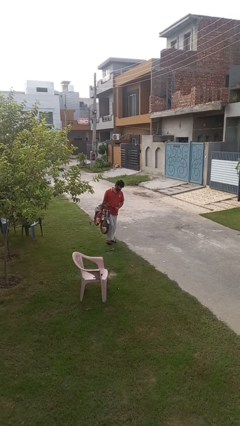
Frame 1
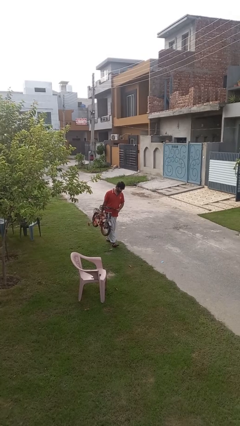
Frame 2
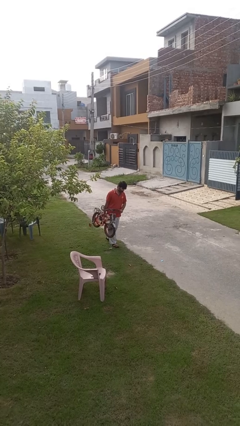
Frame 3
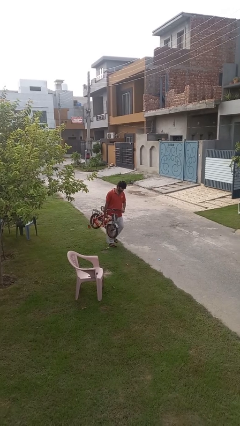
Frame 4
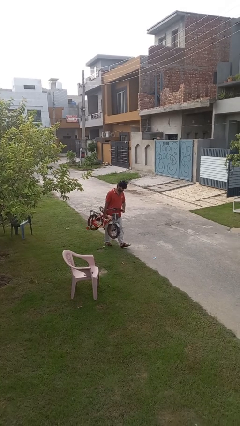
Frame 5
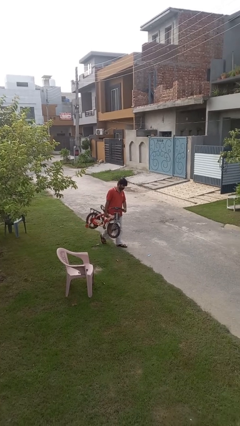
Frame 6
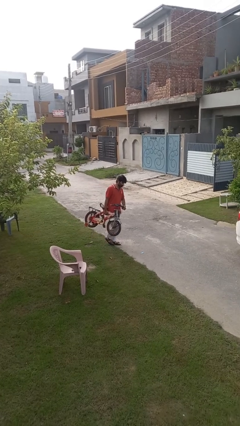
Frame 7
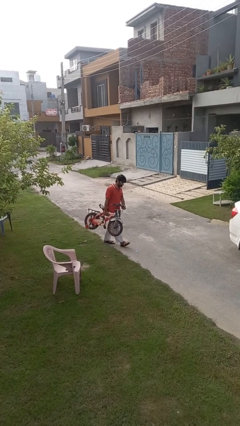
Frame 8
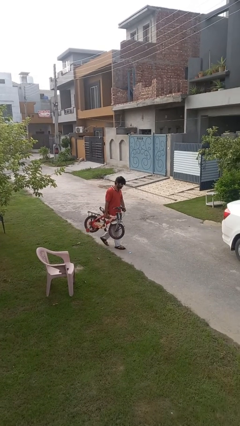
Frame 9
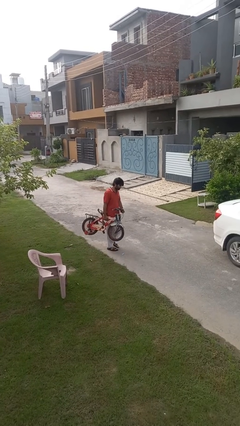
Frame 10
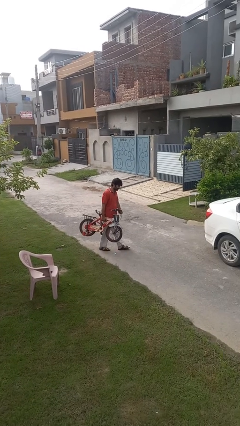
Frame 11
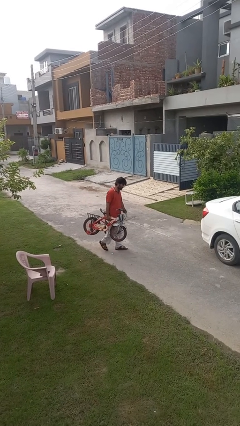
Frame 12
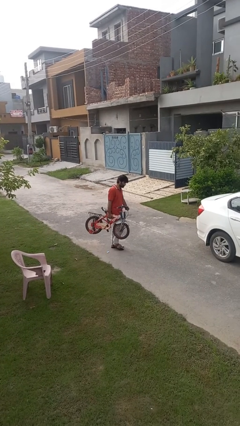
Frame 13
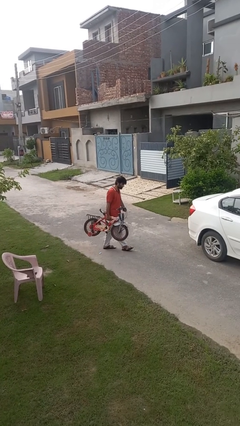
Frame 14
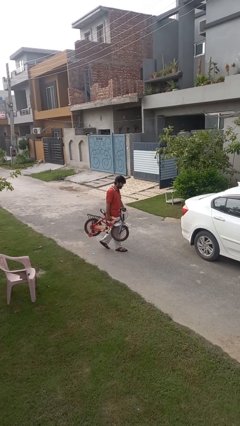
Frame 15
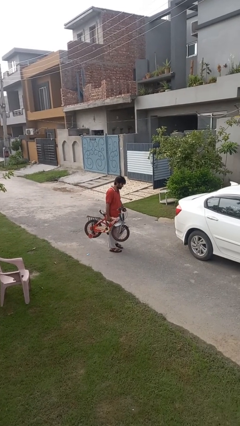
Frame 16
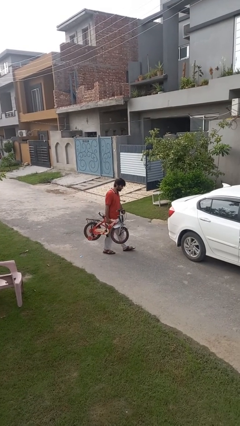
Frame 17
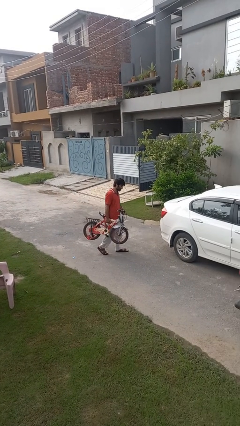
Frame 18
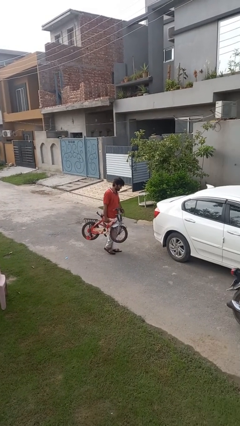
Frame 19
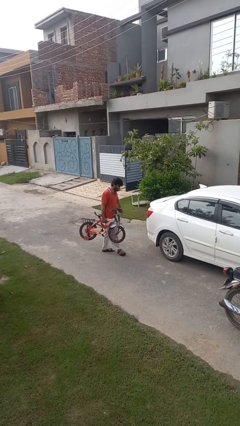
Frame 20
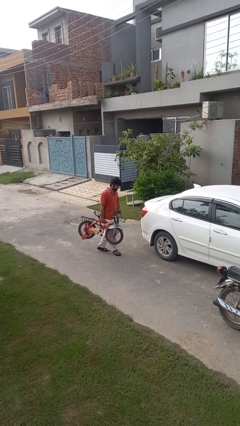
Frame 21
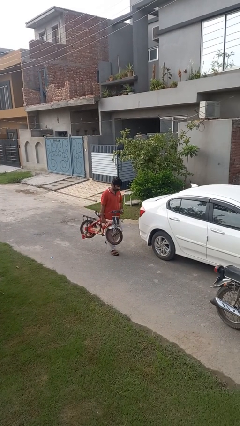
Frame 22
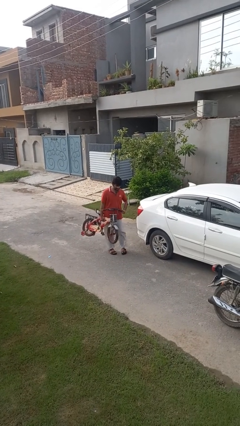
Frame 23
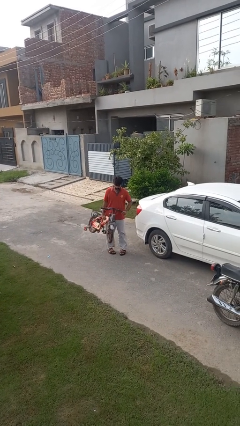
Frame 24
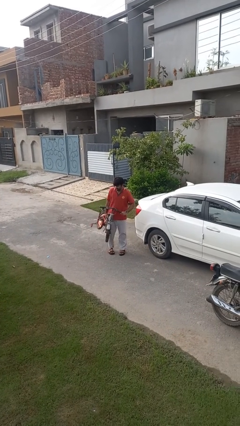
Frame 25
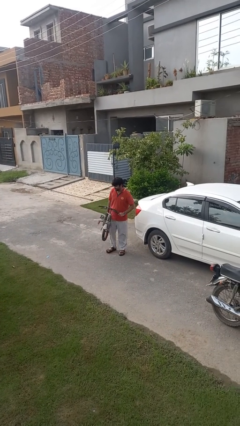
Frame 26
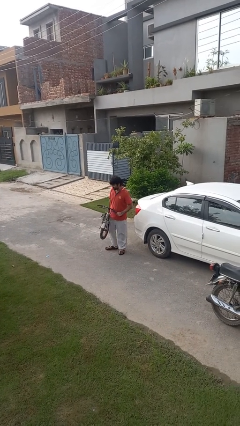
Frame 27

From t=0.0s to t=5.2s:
person carries bicycle

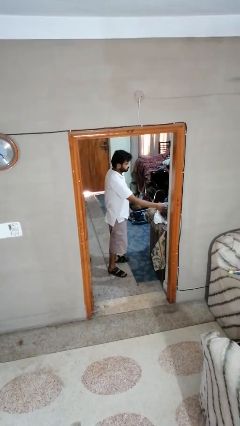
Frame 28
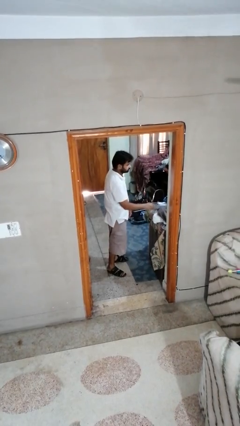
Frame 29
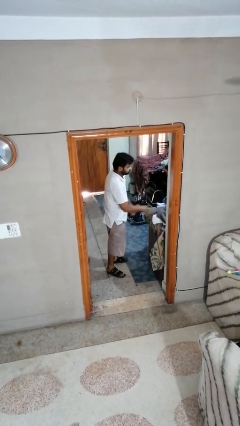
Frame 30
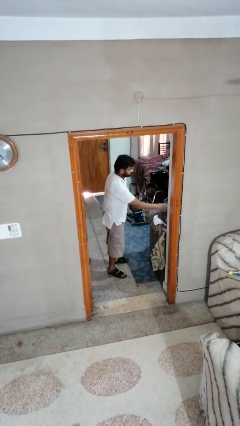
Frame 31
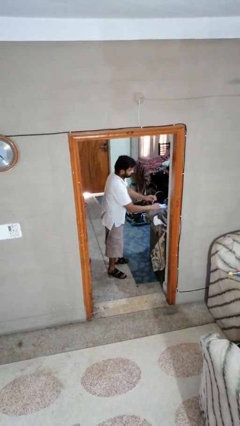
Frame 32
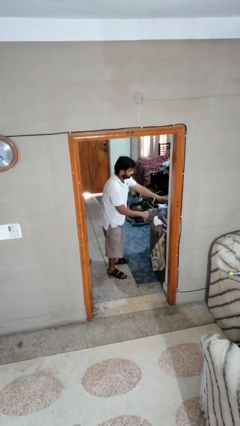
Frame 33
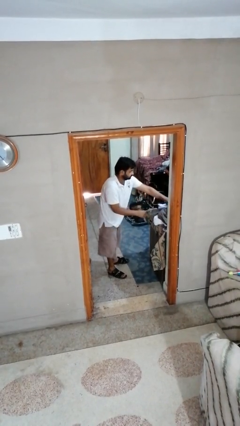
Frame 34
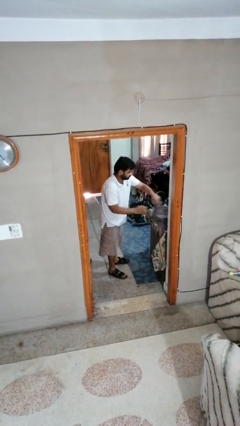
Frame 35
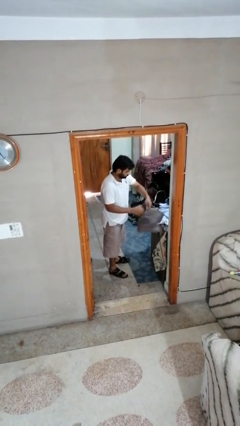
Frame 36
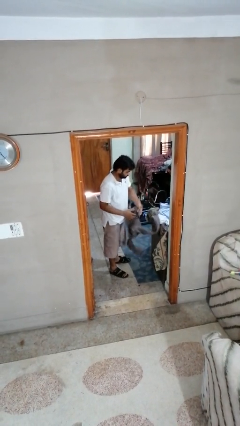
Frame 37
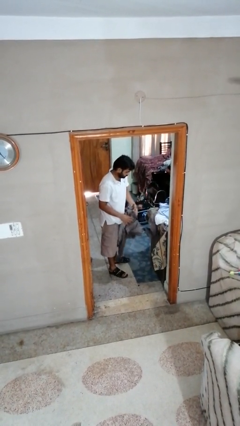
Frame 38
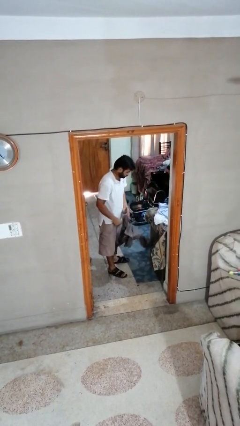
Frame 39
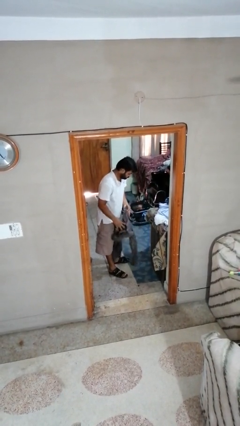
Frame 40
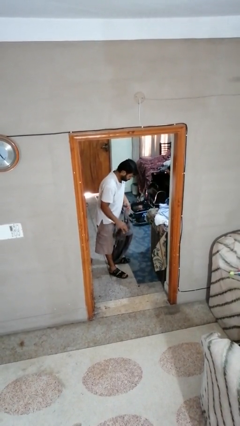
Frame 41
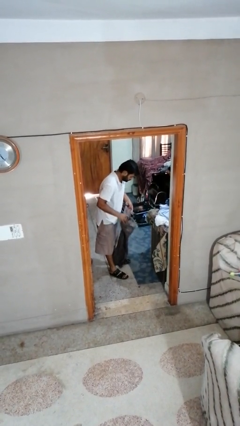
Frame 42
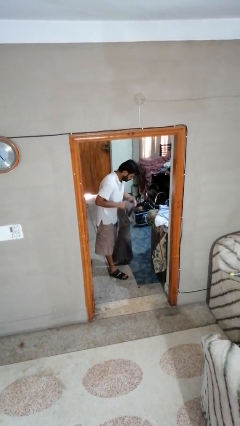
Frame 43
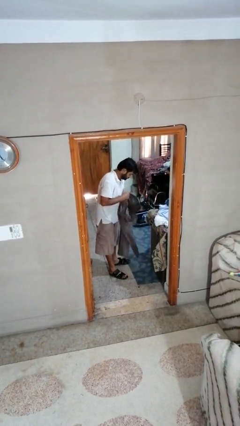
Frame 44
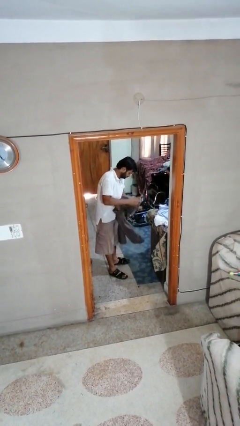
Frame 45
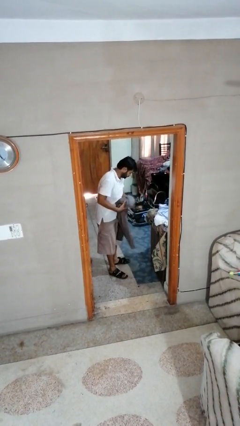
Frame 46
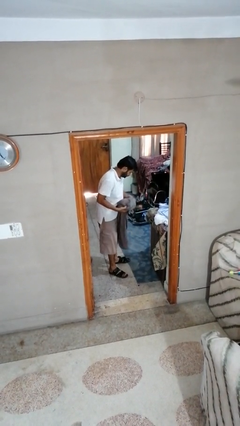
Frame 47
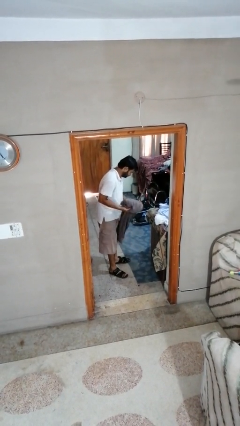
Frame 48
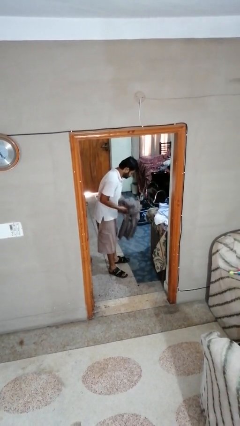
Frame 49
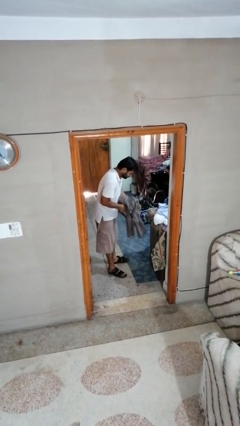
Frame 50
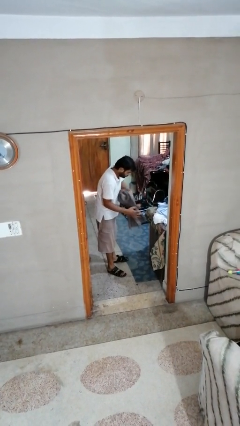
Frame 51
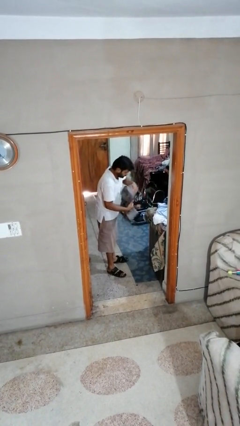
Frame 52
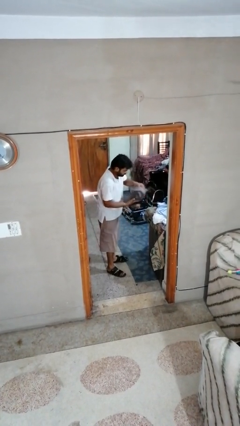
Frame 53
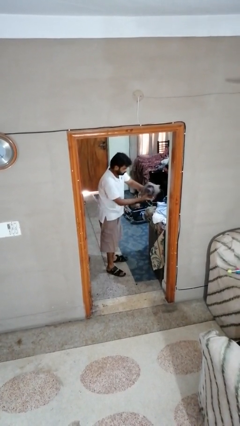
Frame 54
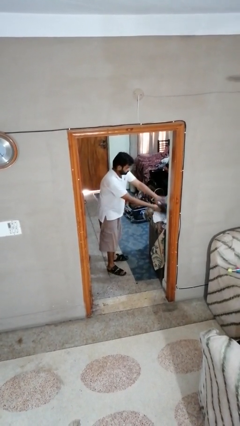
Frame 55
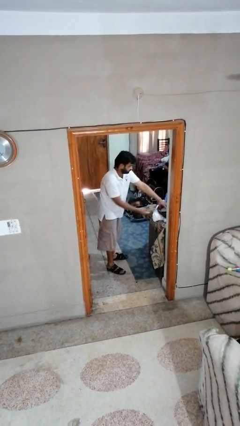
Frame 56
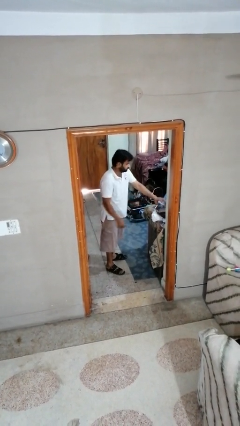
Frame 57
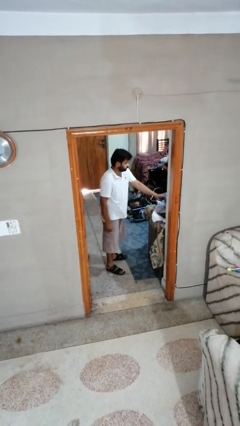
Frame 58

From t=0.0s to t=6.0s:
person folds pants

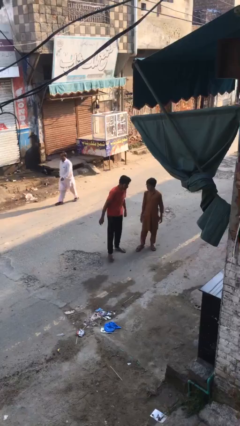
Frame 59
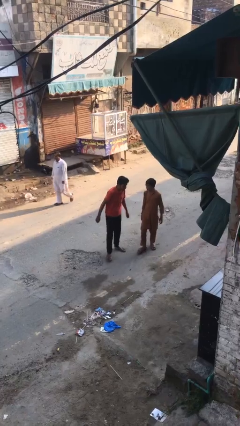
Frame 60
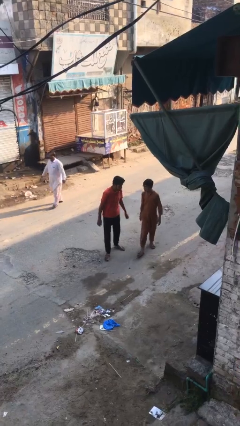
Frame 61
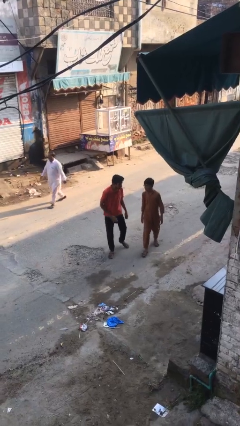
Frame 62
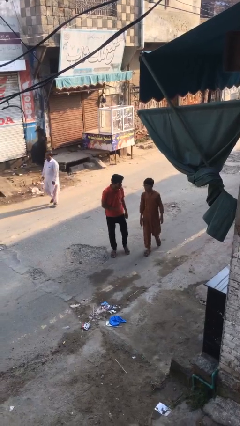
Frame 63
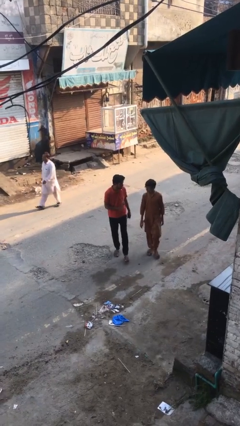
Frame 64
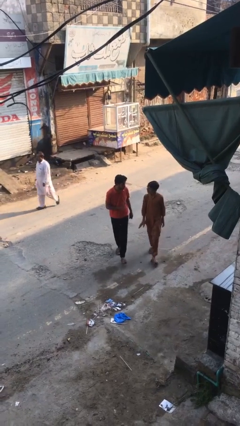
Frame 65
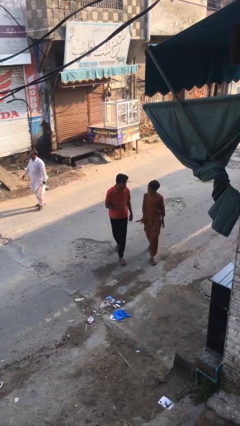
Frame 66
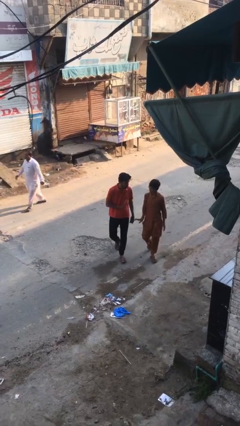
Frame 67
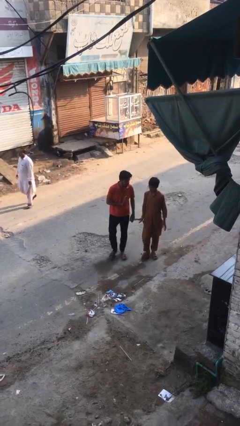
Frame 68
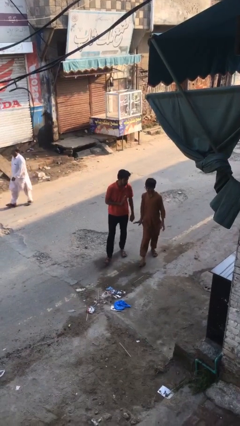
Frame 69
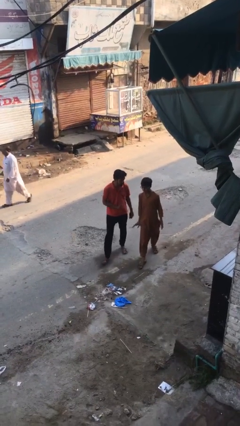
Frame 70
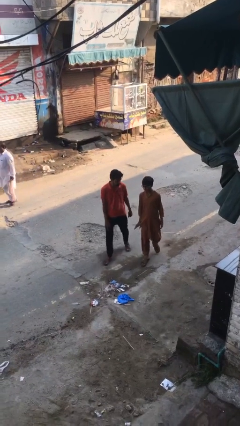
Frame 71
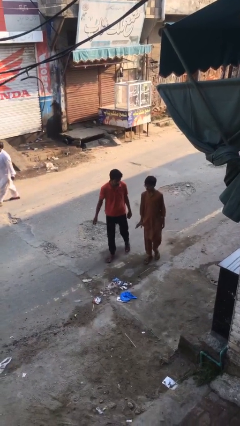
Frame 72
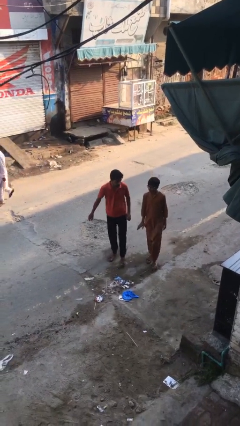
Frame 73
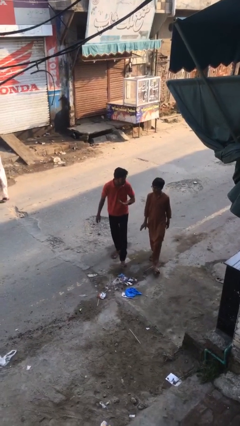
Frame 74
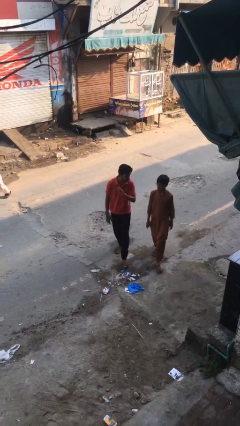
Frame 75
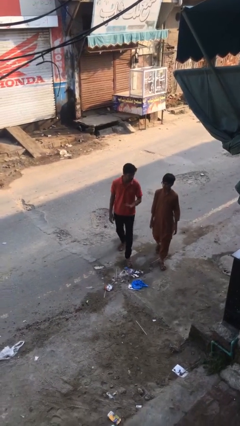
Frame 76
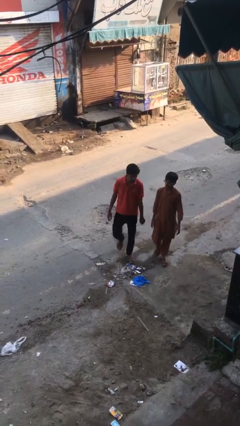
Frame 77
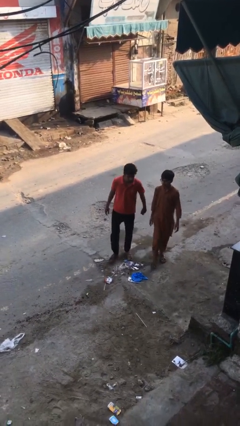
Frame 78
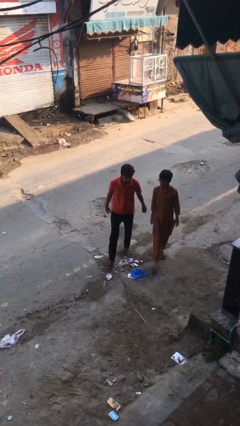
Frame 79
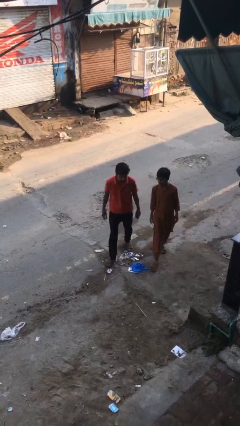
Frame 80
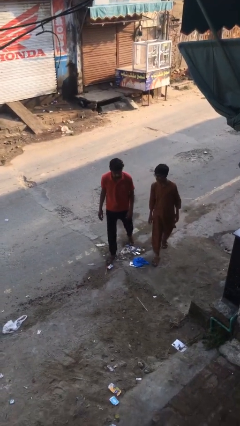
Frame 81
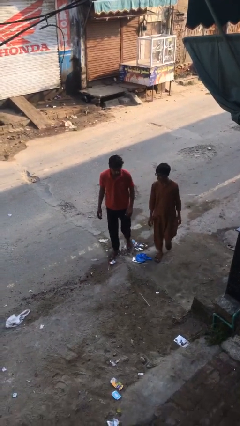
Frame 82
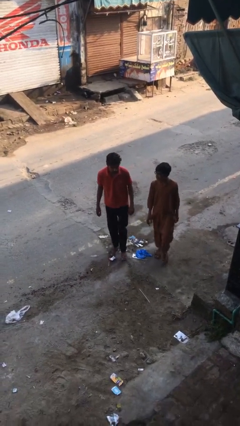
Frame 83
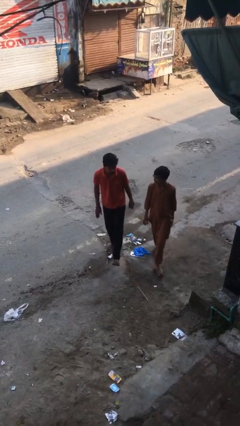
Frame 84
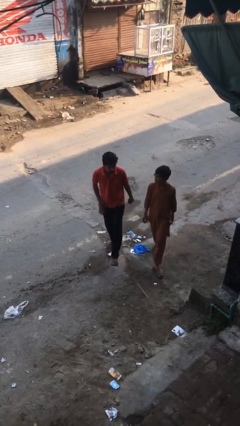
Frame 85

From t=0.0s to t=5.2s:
person talks to person

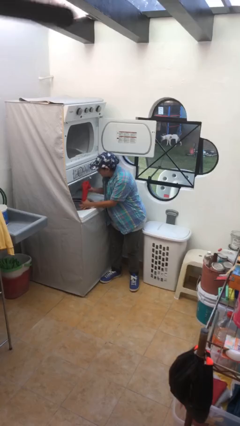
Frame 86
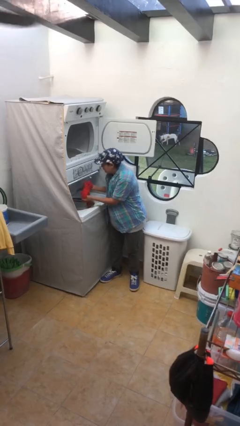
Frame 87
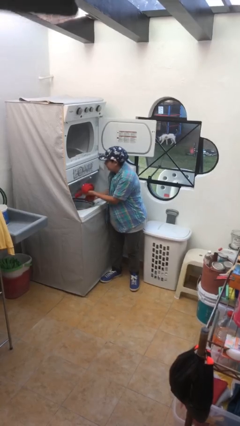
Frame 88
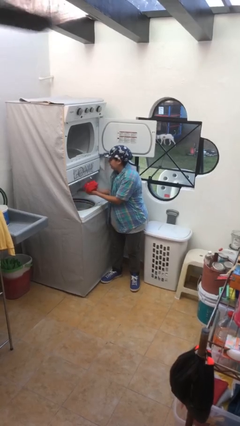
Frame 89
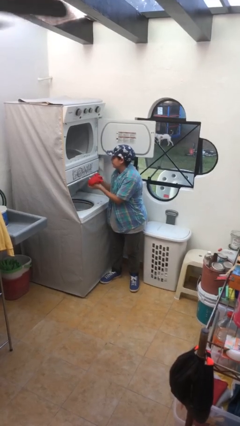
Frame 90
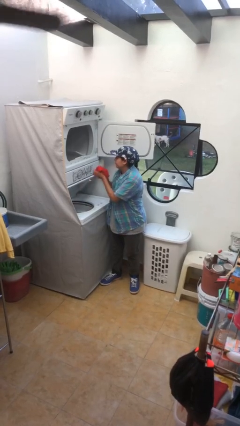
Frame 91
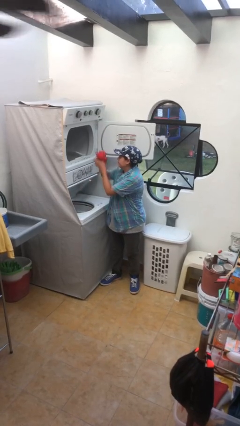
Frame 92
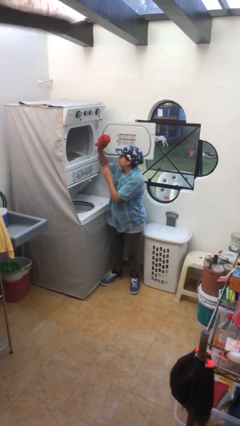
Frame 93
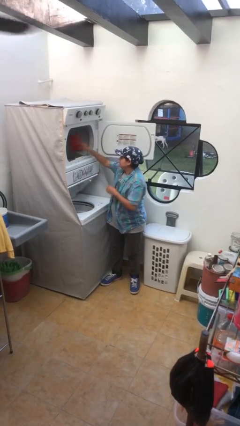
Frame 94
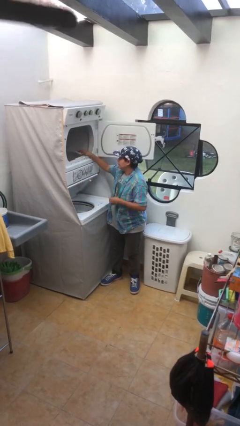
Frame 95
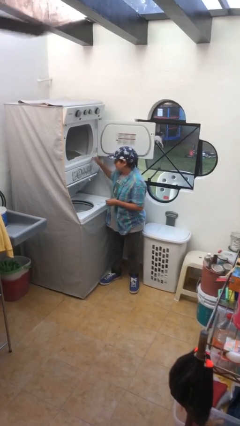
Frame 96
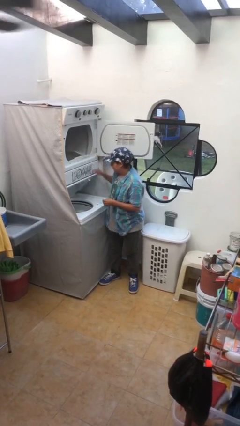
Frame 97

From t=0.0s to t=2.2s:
person loads dryer
